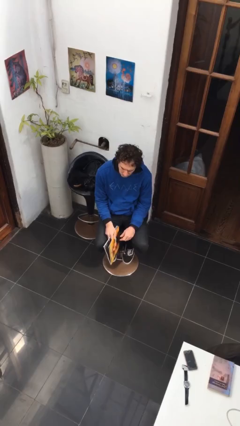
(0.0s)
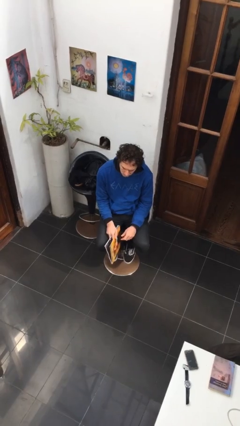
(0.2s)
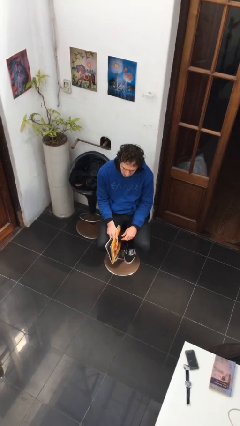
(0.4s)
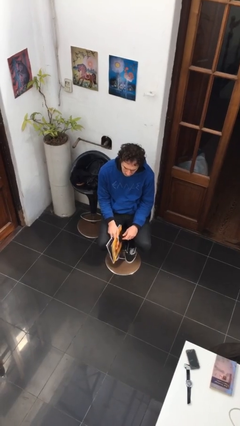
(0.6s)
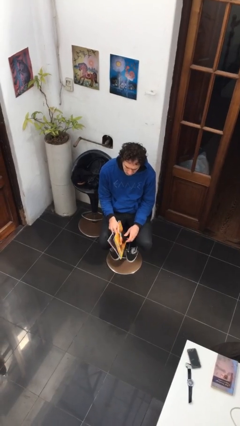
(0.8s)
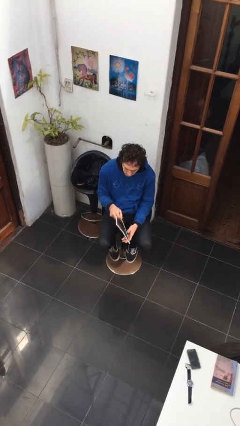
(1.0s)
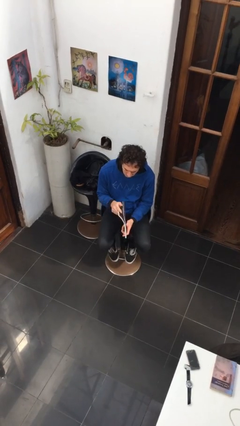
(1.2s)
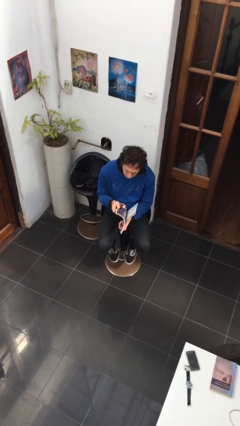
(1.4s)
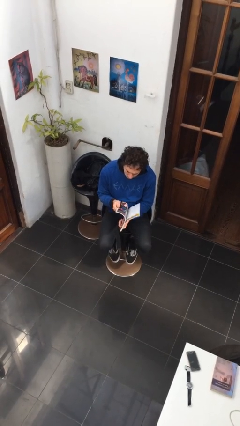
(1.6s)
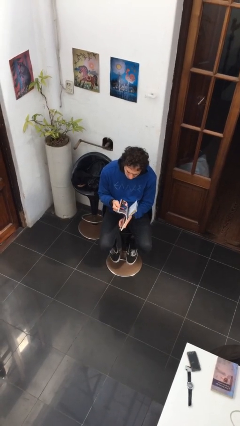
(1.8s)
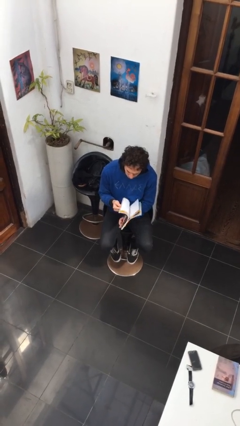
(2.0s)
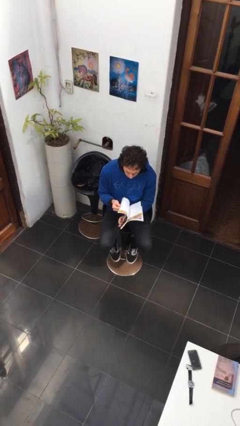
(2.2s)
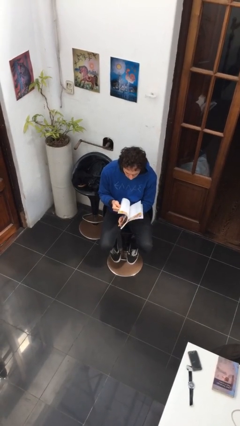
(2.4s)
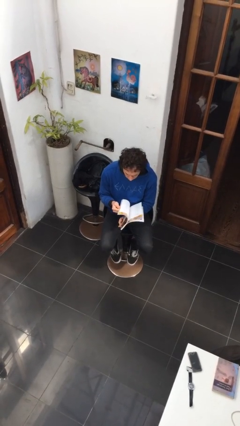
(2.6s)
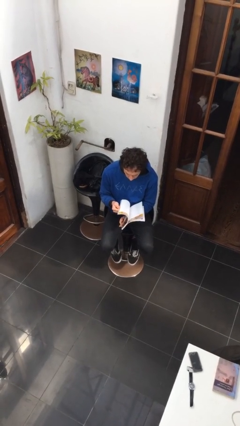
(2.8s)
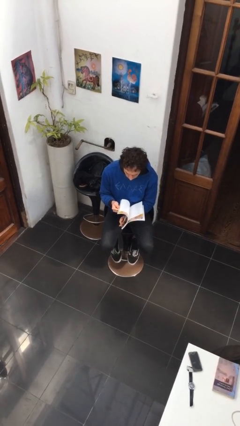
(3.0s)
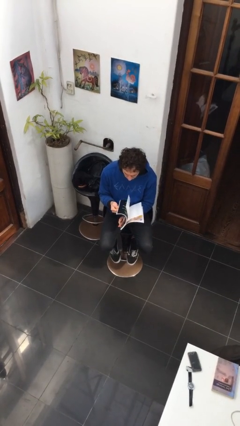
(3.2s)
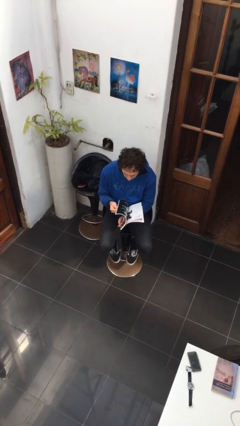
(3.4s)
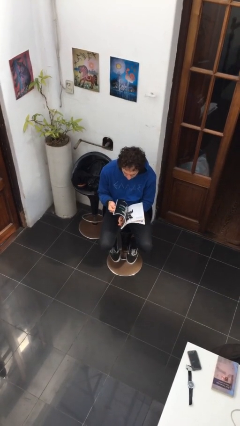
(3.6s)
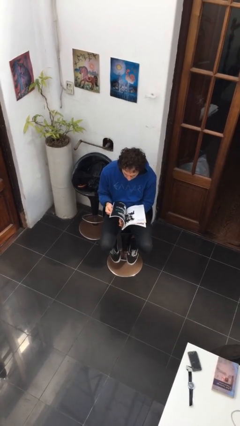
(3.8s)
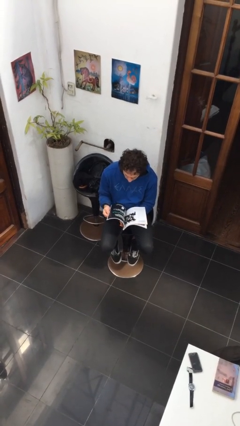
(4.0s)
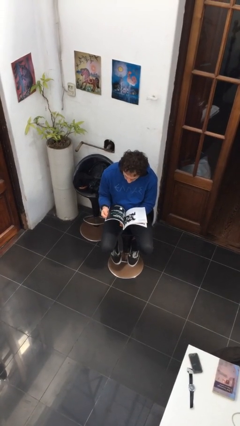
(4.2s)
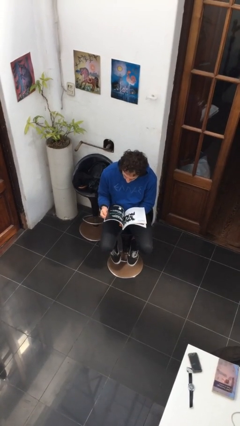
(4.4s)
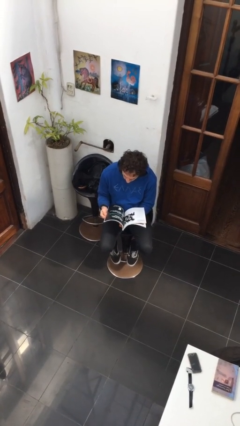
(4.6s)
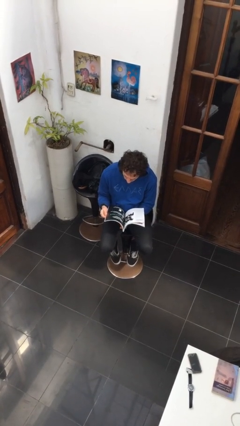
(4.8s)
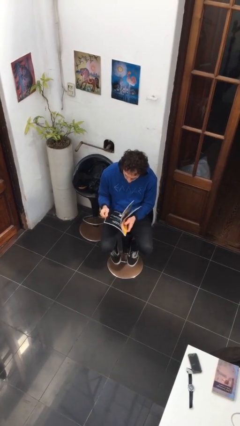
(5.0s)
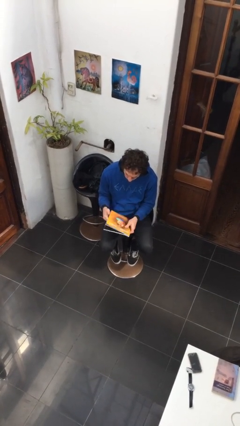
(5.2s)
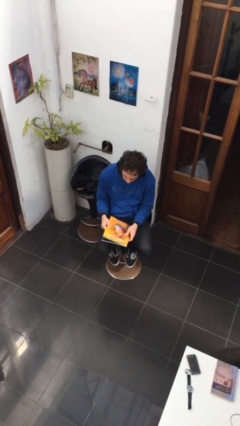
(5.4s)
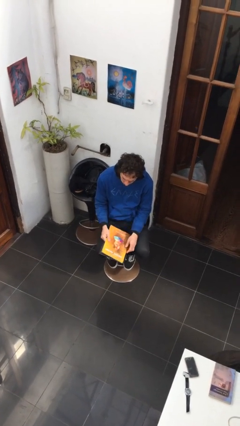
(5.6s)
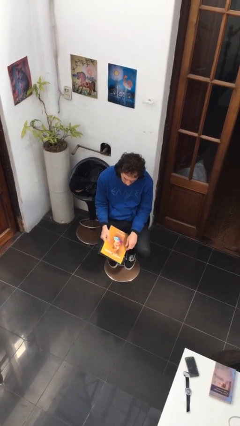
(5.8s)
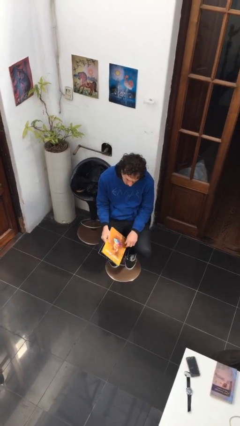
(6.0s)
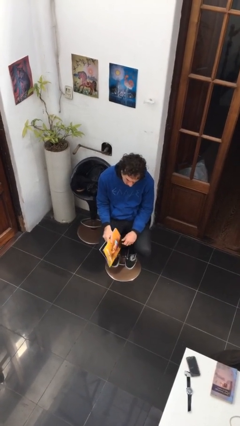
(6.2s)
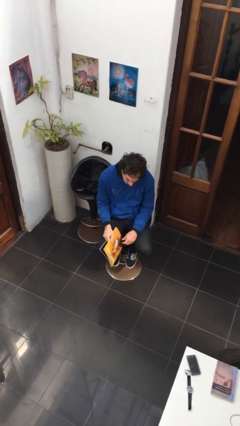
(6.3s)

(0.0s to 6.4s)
person reads magazine

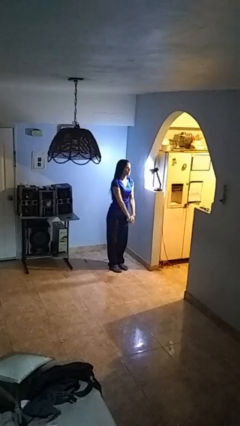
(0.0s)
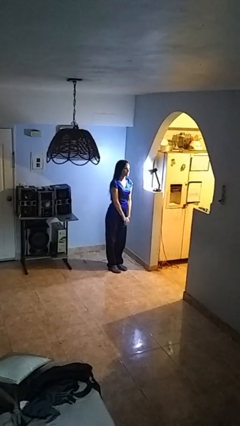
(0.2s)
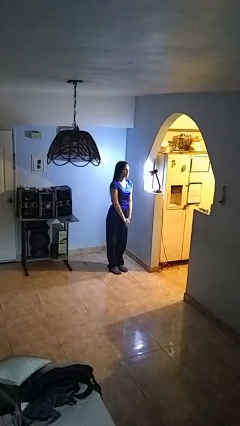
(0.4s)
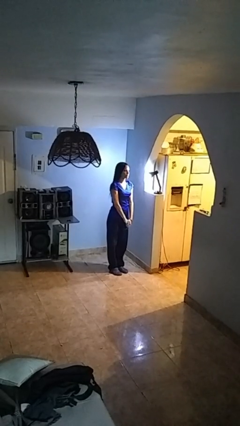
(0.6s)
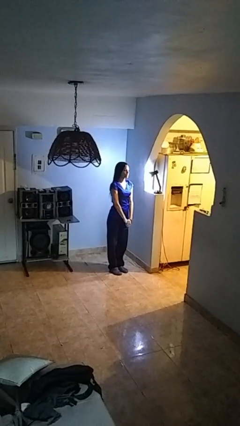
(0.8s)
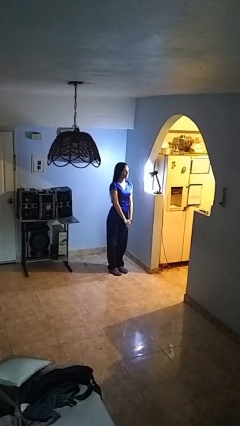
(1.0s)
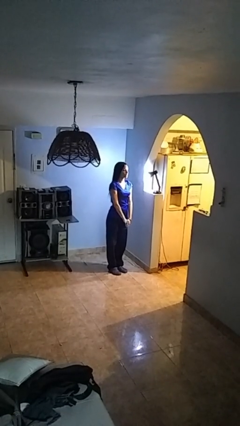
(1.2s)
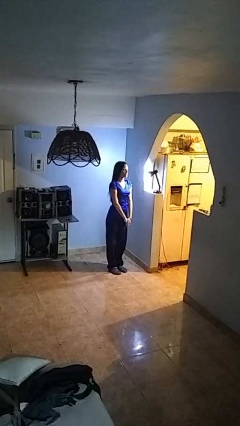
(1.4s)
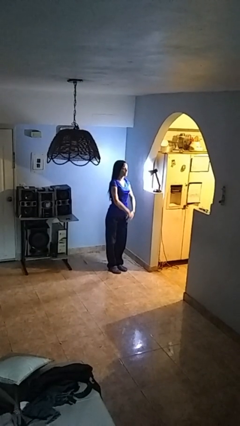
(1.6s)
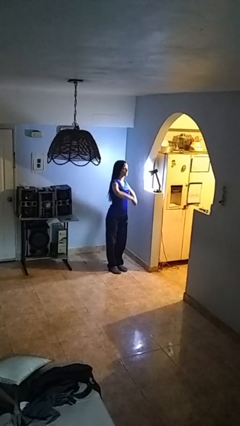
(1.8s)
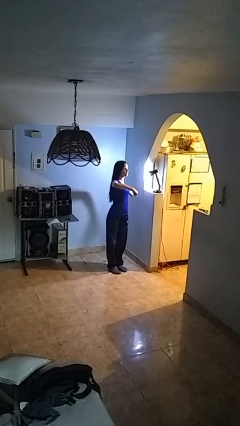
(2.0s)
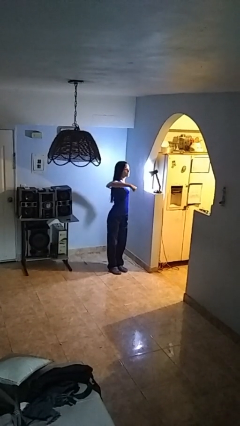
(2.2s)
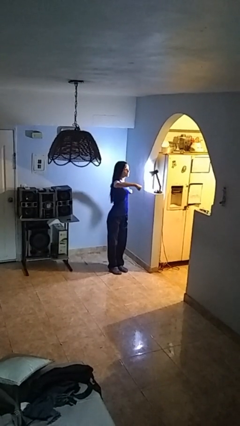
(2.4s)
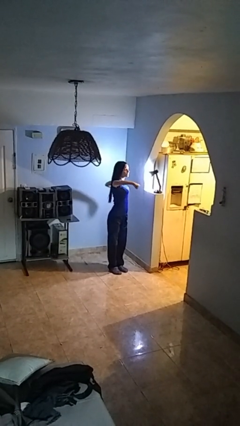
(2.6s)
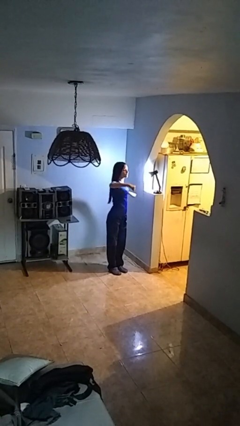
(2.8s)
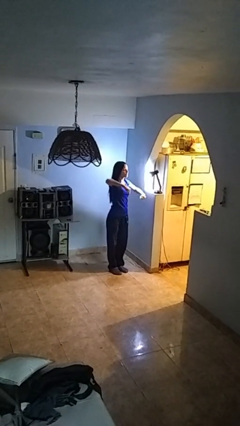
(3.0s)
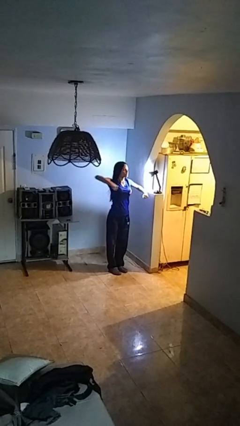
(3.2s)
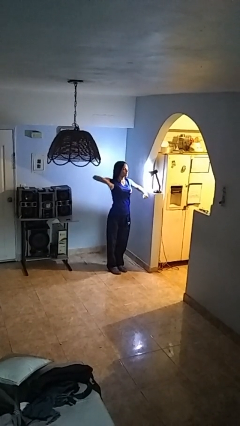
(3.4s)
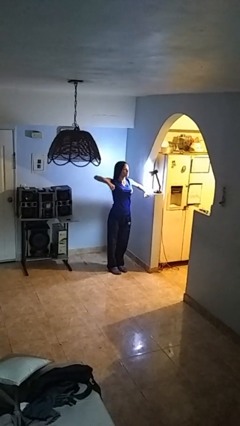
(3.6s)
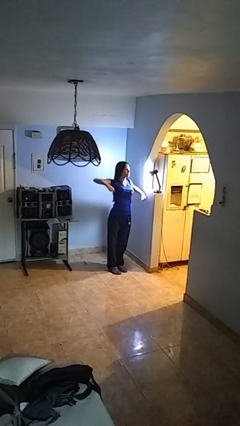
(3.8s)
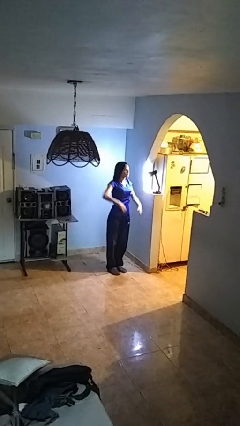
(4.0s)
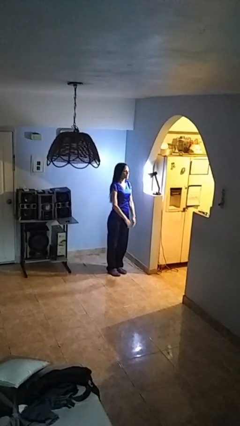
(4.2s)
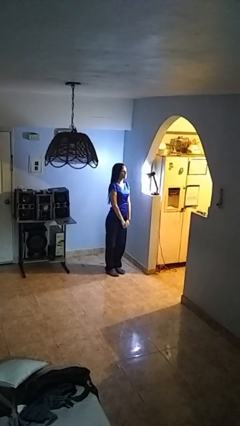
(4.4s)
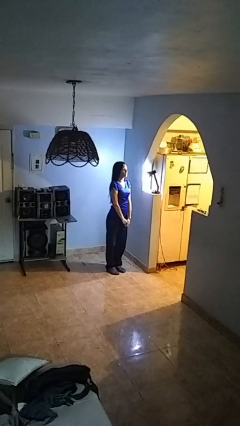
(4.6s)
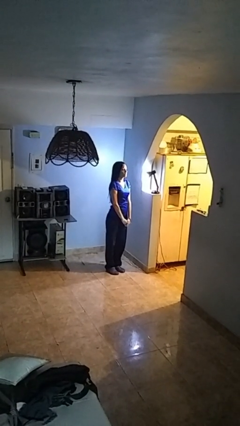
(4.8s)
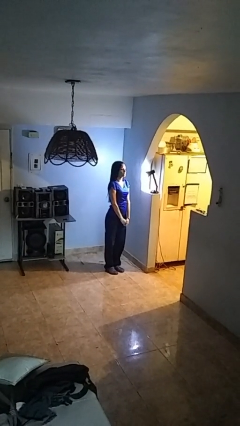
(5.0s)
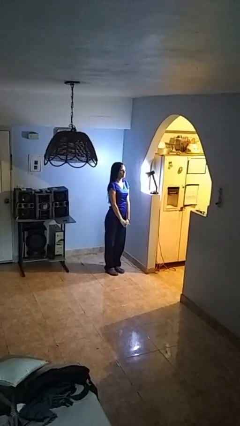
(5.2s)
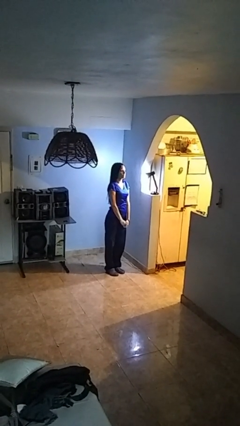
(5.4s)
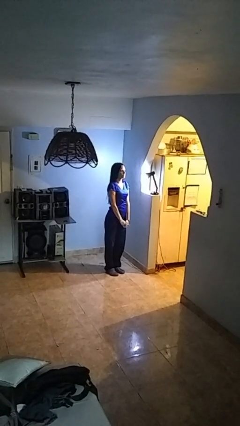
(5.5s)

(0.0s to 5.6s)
person stretches arms to side

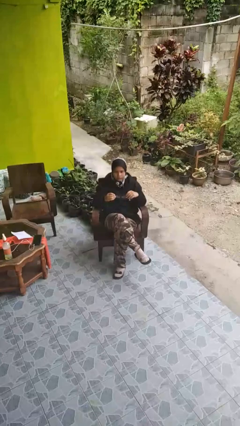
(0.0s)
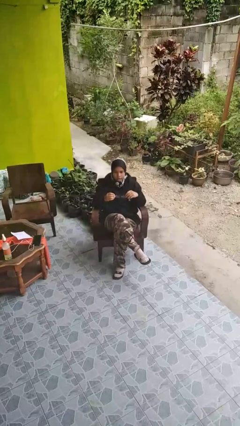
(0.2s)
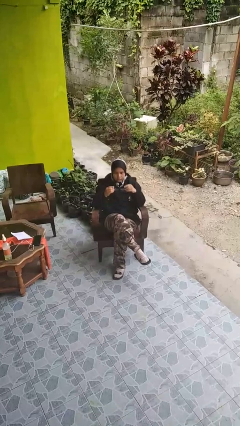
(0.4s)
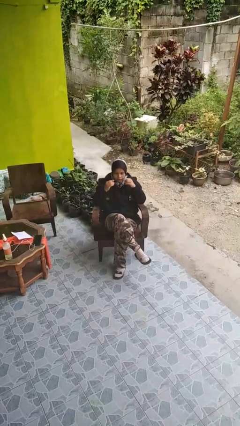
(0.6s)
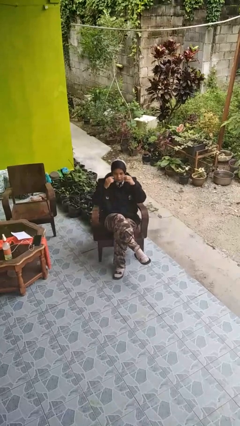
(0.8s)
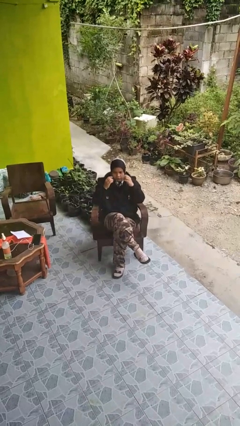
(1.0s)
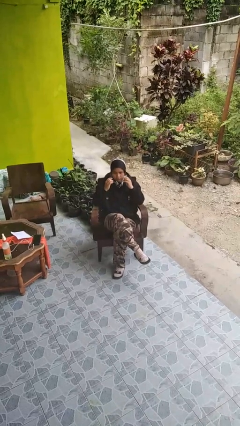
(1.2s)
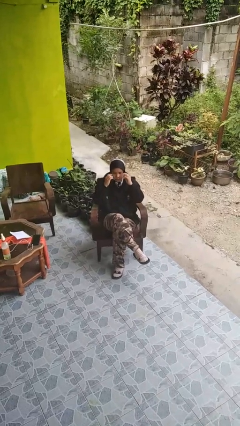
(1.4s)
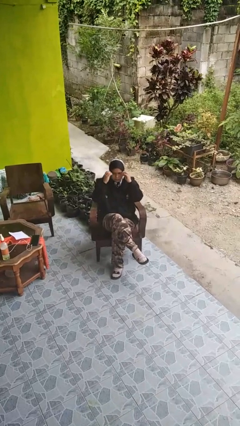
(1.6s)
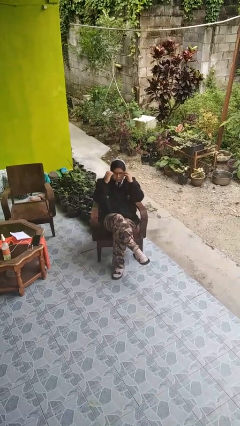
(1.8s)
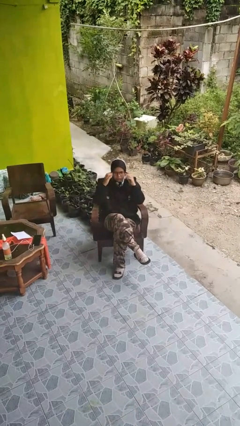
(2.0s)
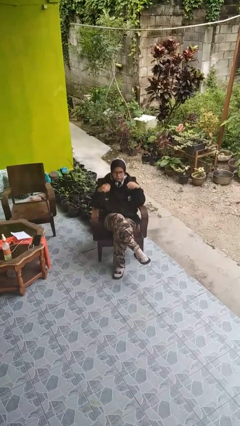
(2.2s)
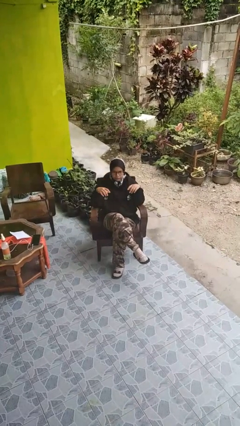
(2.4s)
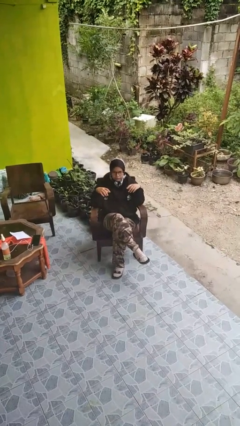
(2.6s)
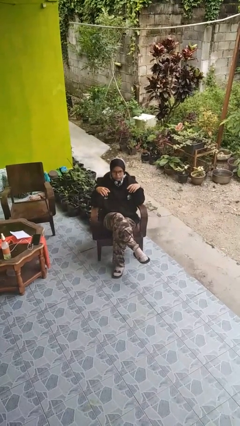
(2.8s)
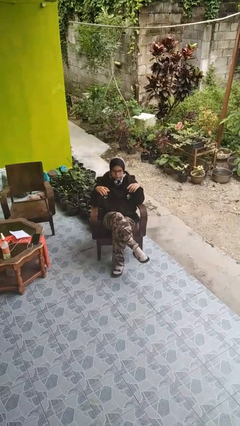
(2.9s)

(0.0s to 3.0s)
person puts on glasses

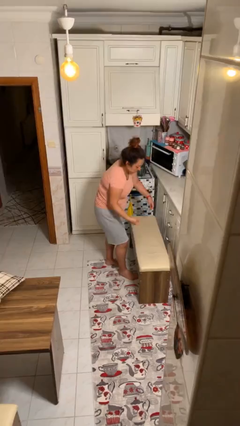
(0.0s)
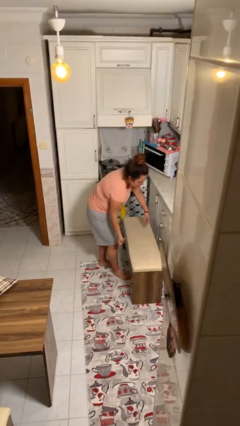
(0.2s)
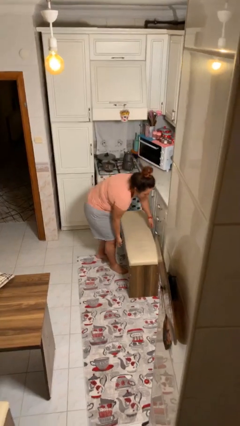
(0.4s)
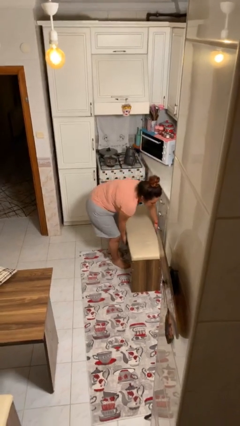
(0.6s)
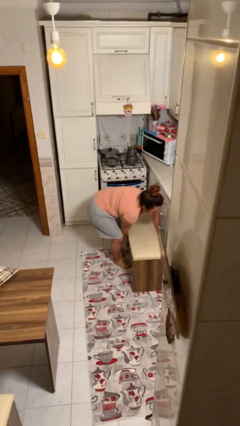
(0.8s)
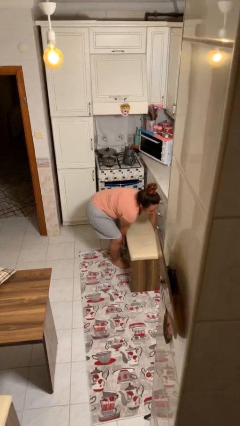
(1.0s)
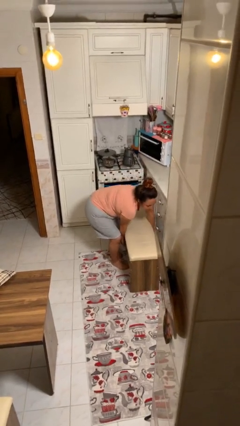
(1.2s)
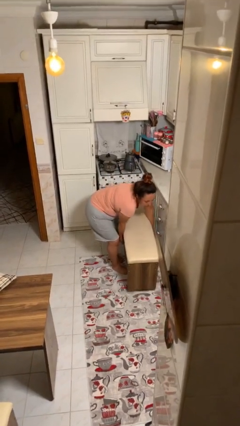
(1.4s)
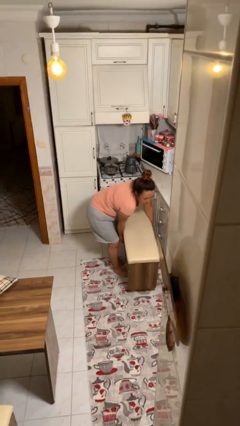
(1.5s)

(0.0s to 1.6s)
person picks up object from floor

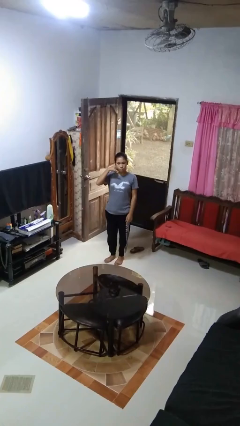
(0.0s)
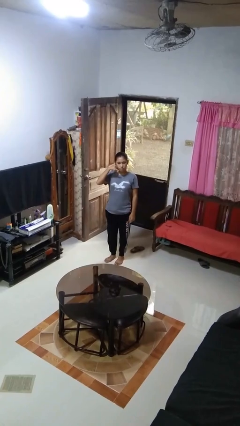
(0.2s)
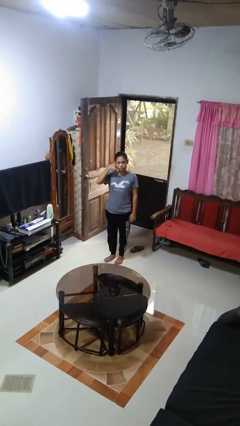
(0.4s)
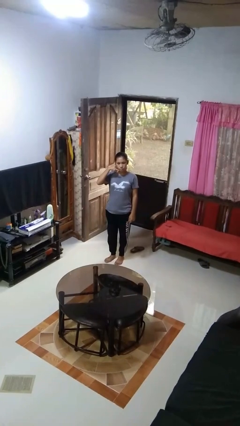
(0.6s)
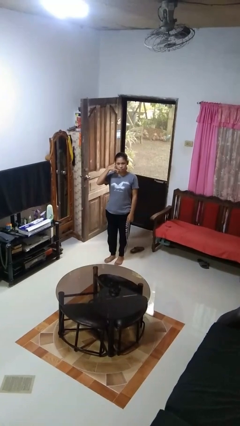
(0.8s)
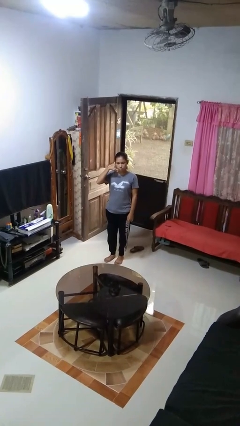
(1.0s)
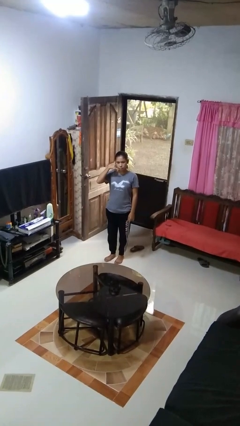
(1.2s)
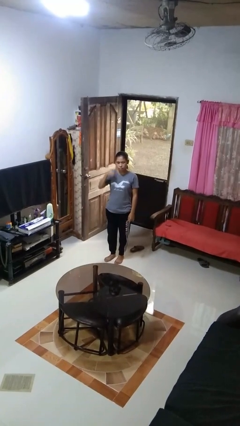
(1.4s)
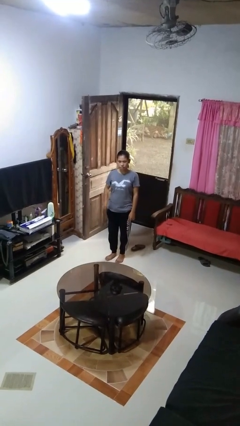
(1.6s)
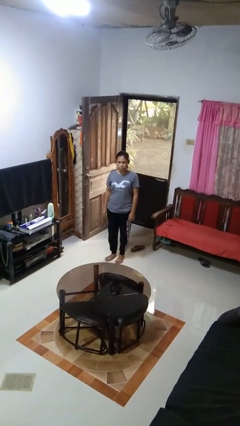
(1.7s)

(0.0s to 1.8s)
person gestures call me
